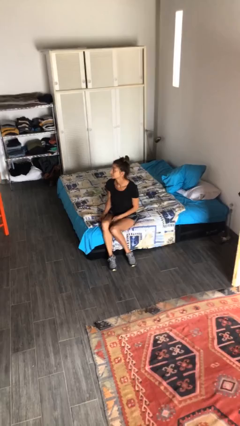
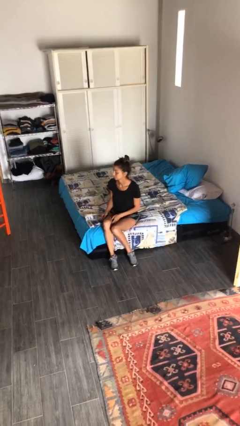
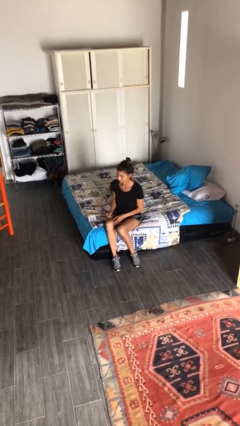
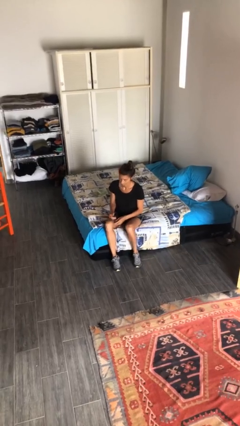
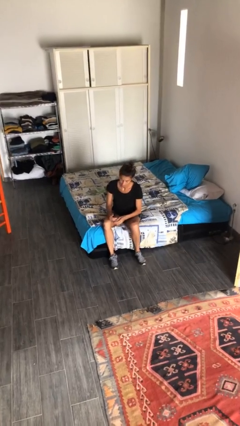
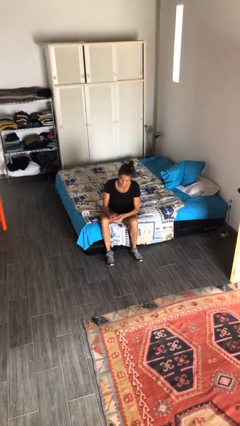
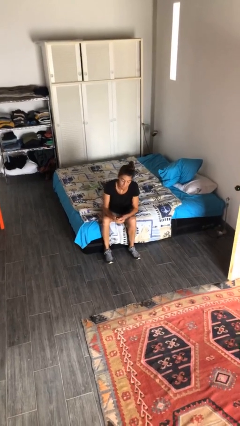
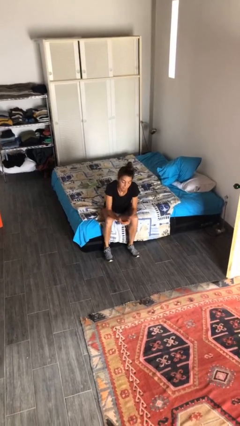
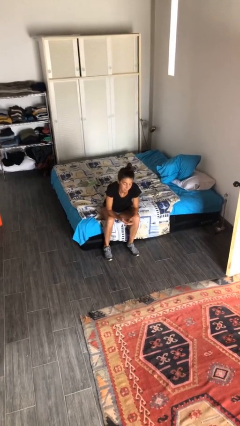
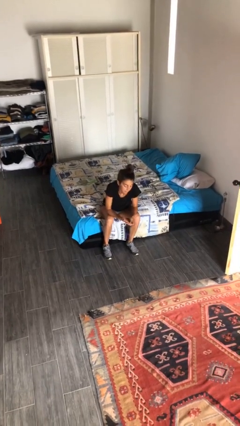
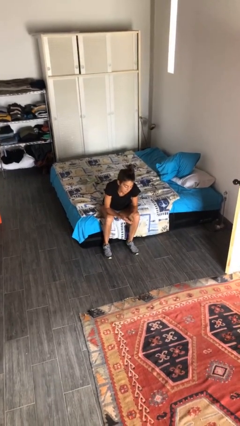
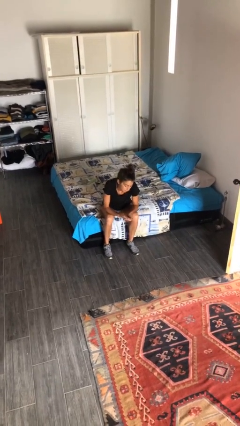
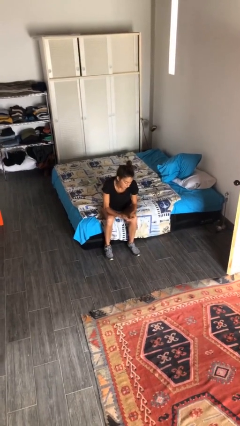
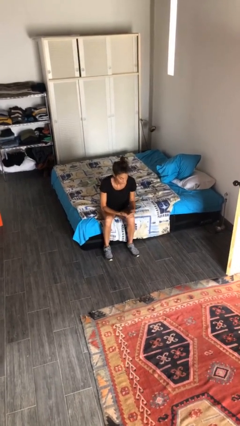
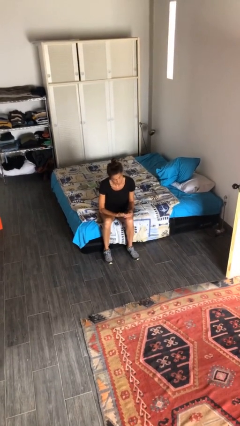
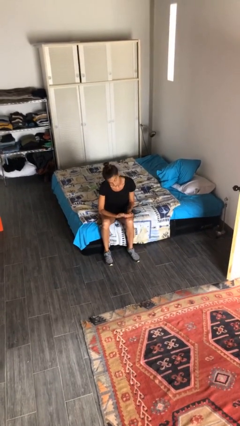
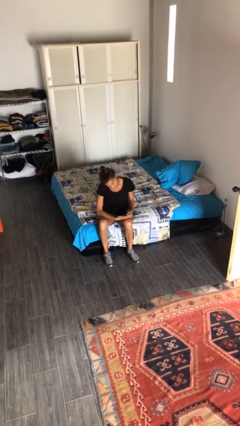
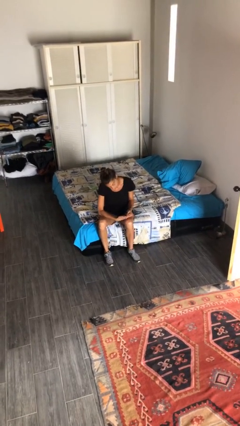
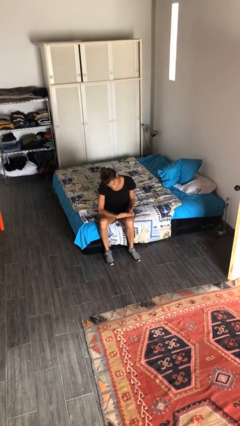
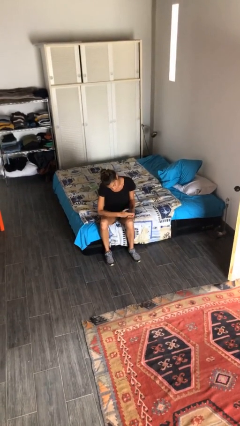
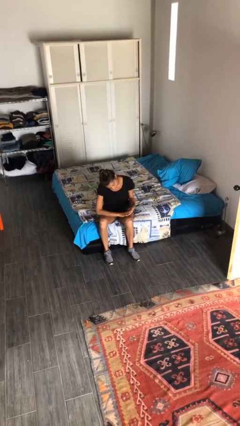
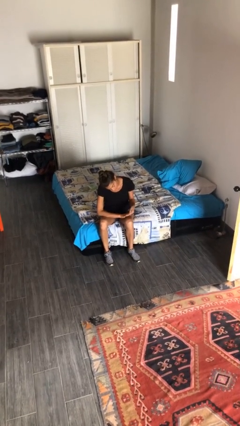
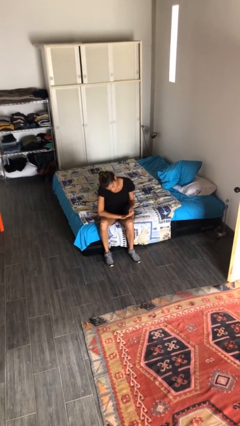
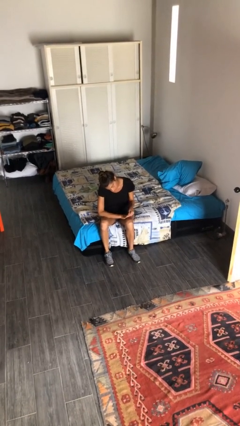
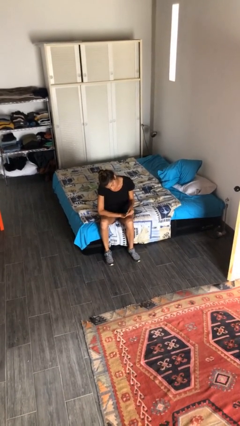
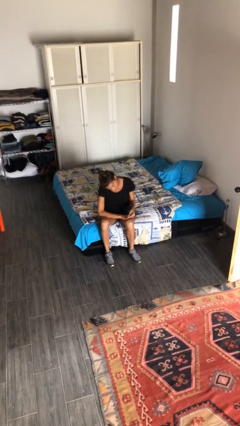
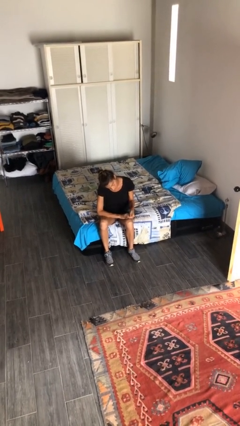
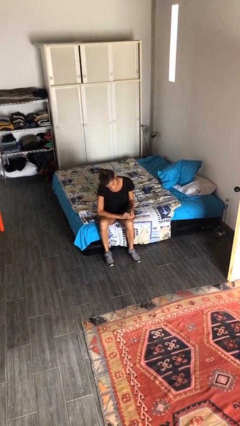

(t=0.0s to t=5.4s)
person looks at hands in lap

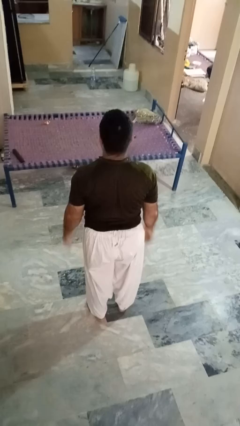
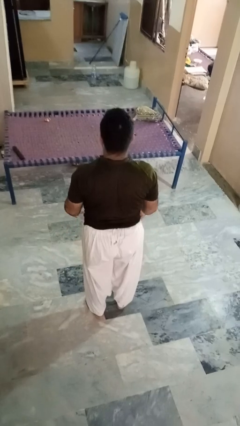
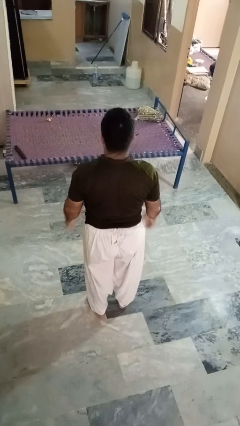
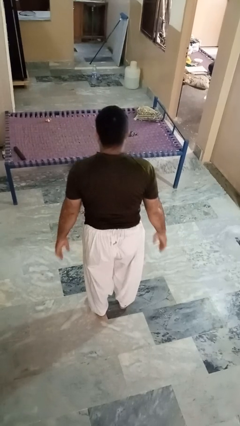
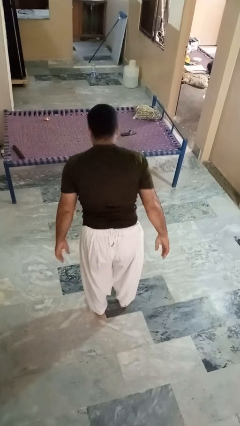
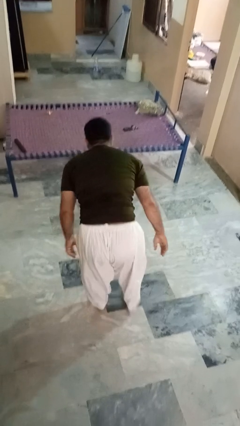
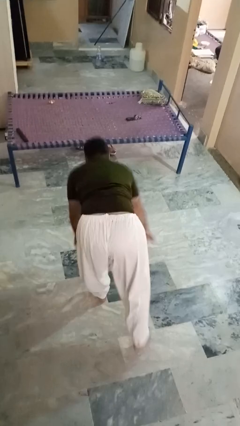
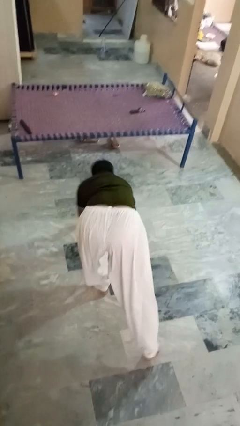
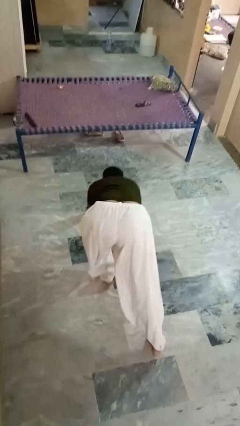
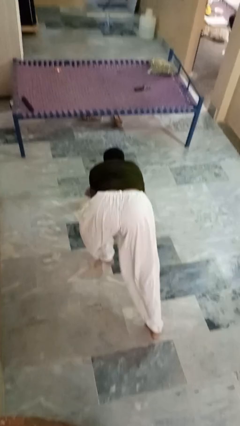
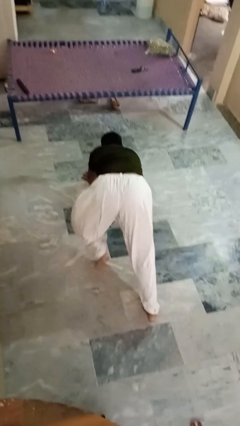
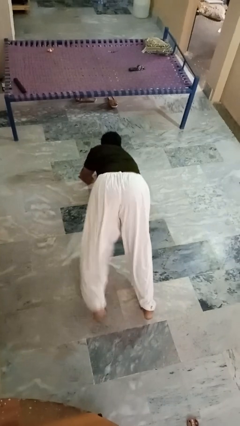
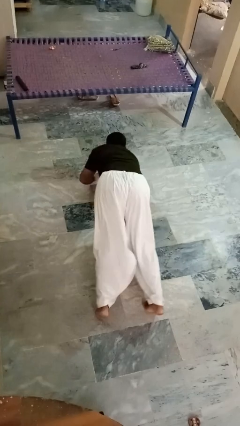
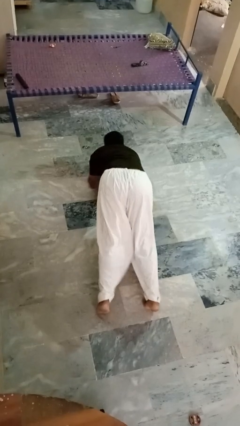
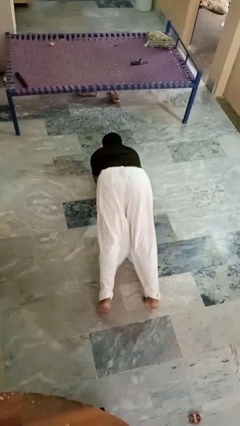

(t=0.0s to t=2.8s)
person exercises with plank

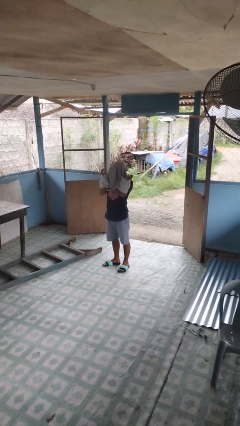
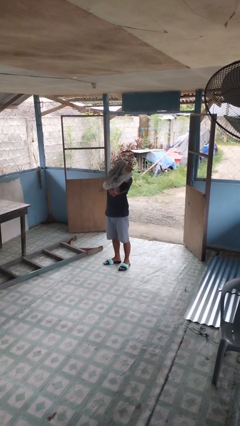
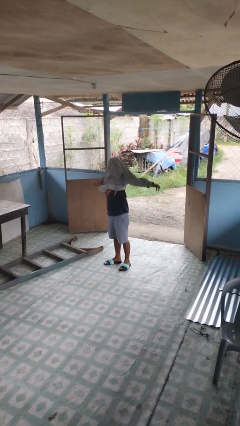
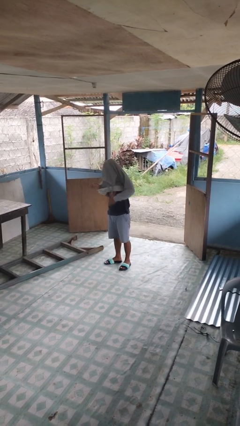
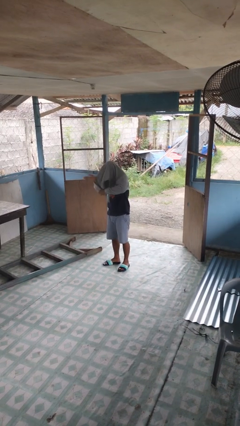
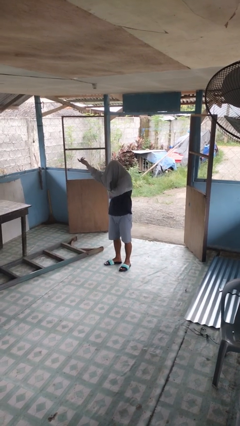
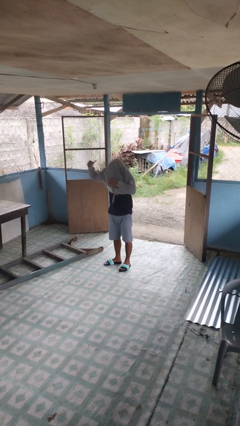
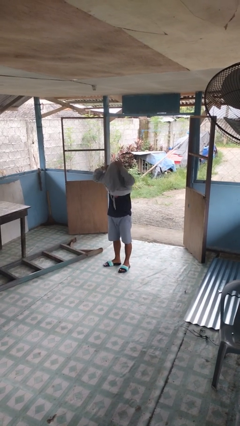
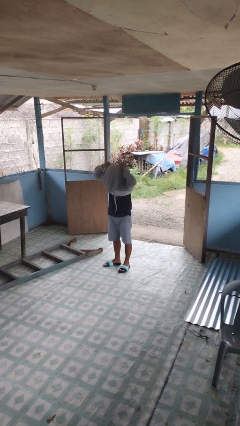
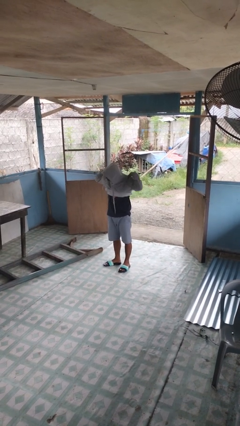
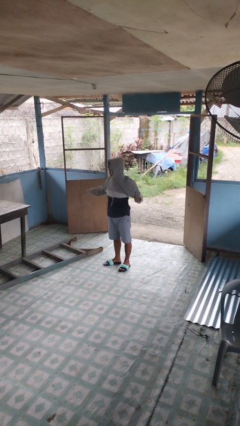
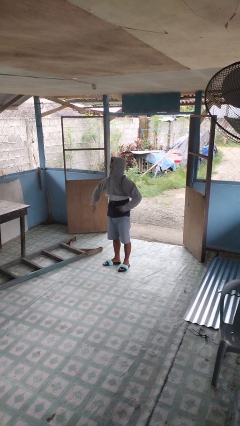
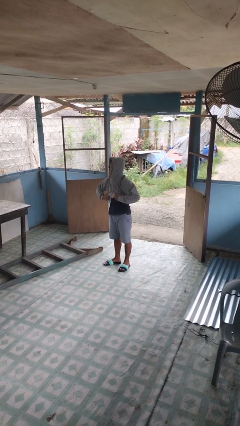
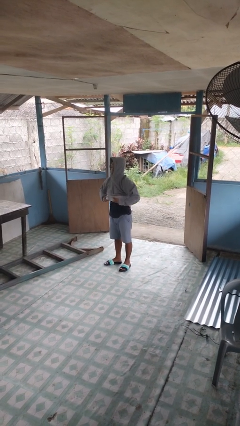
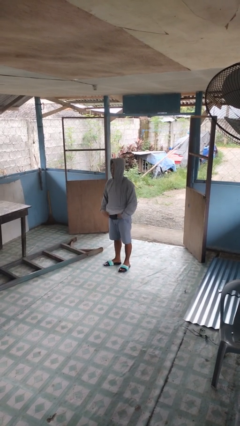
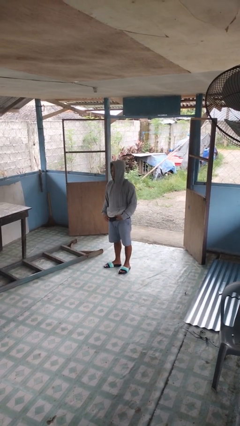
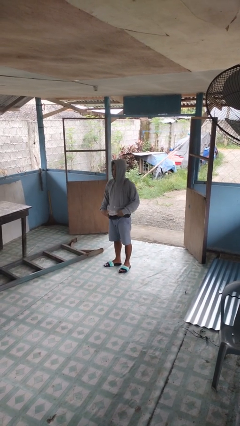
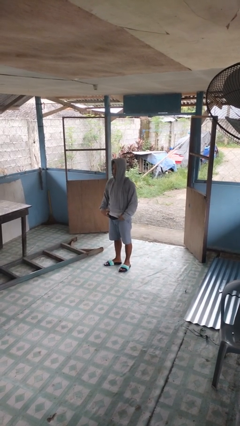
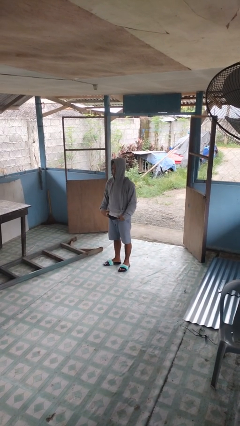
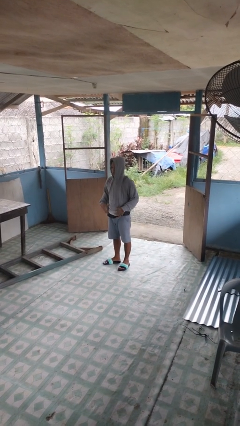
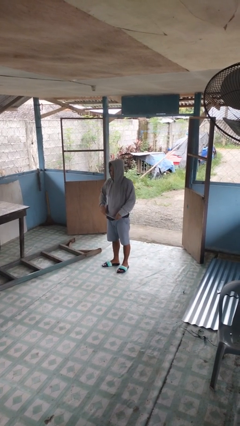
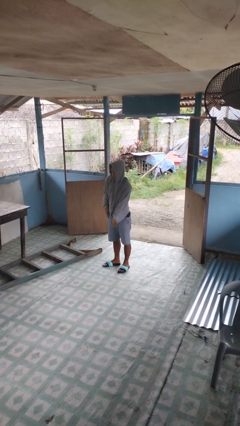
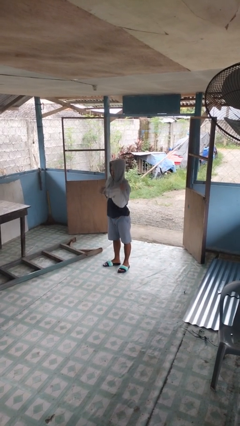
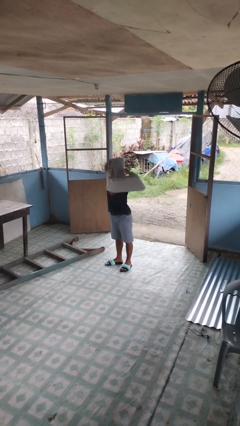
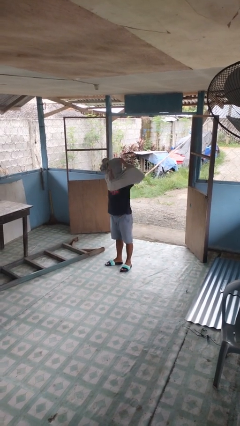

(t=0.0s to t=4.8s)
person puts on hoodie

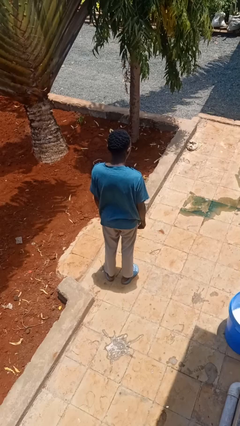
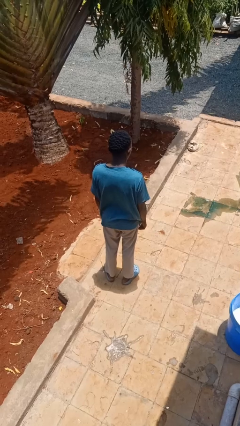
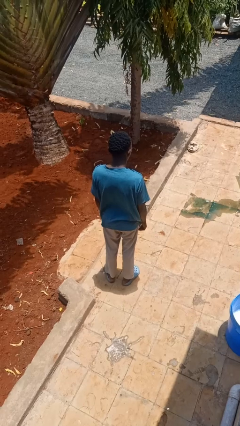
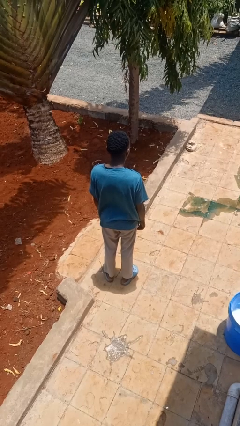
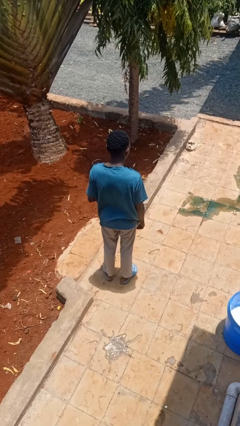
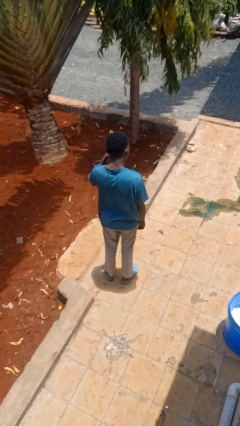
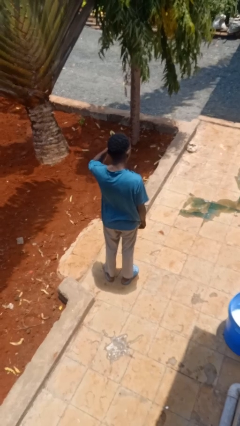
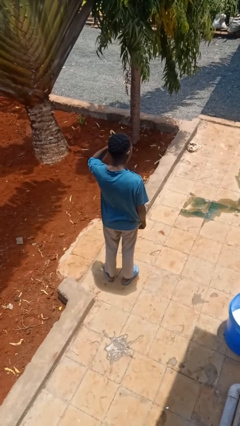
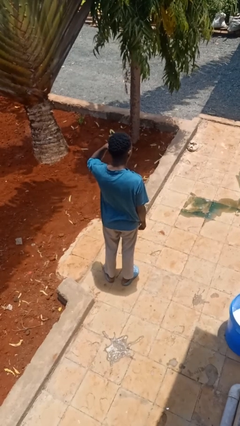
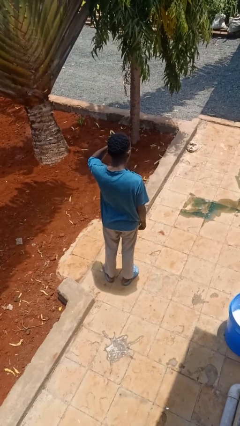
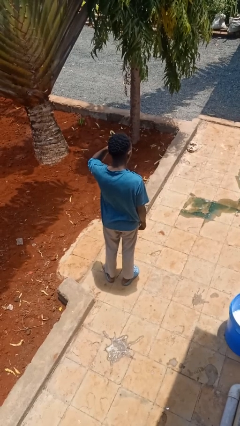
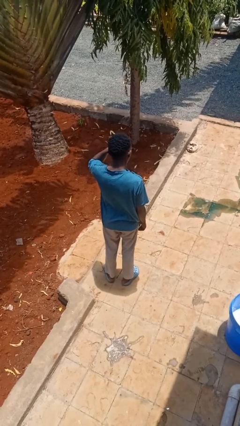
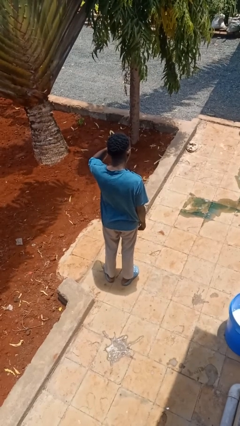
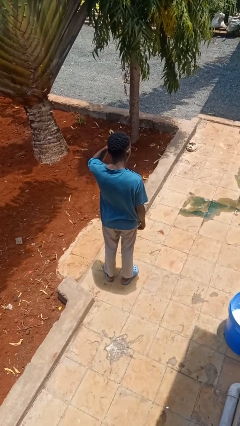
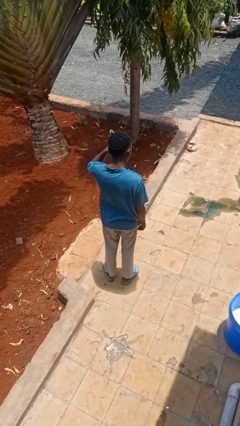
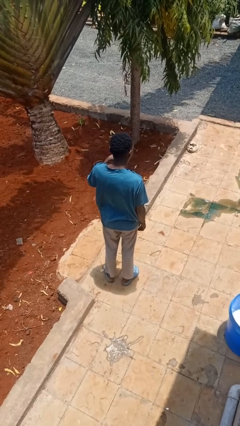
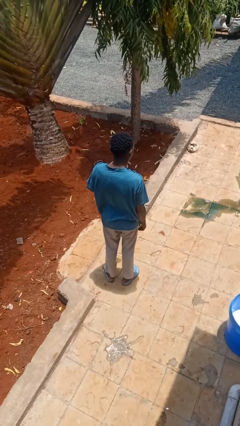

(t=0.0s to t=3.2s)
person rubs eyes

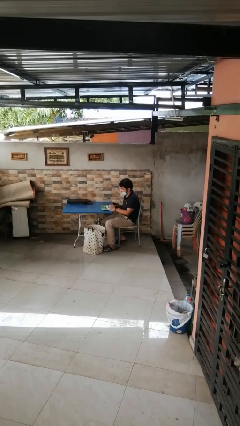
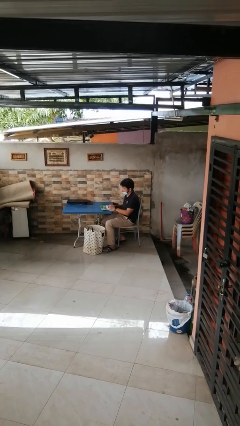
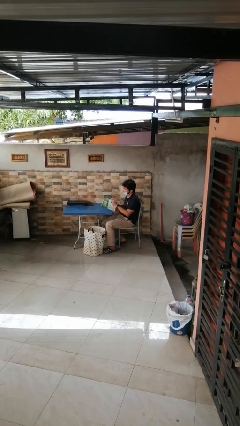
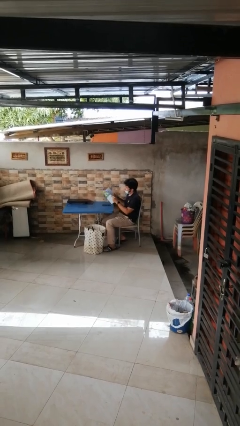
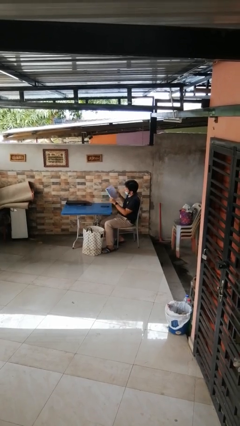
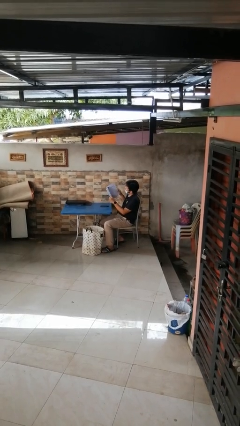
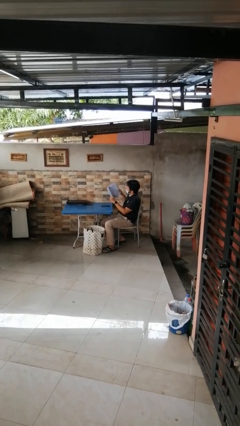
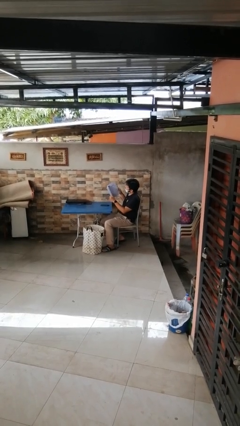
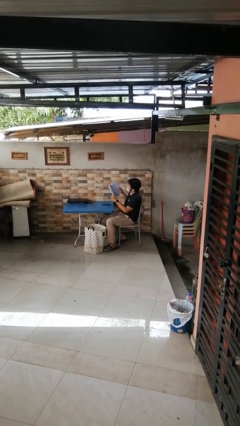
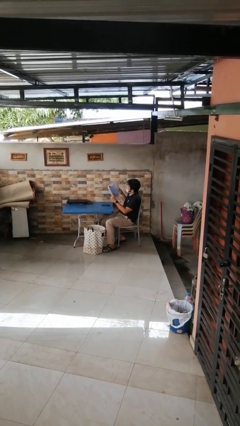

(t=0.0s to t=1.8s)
person reads magazine
